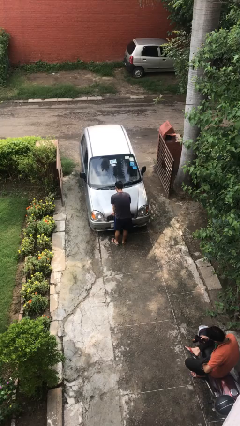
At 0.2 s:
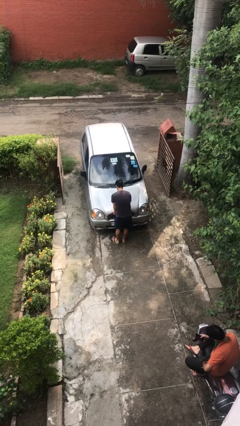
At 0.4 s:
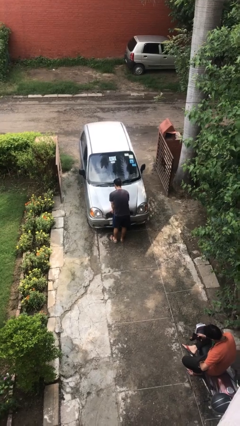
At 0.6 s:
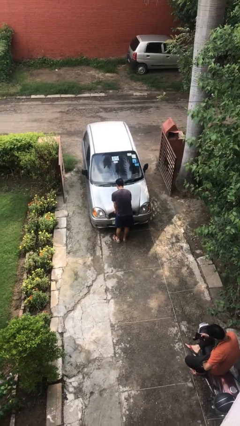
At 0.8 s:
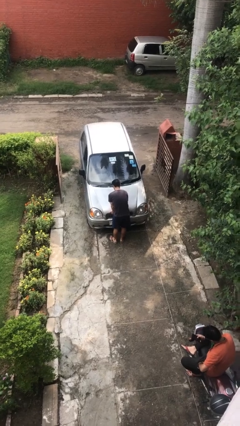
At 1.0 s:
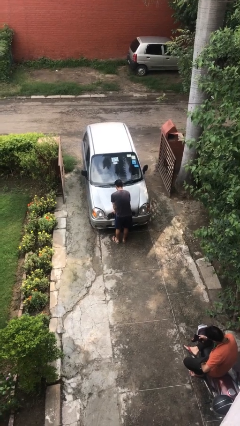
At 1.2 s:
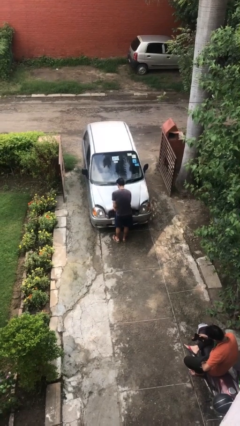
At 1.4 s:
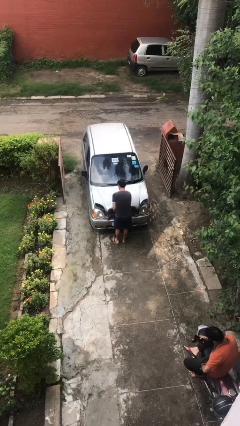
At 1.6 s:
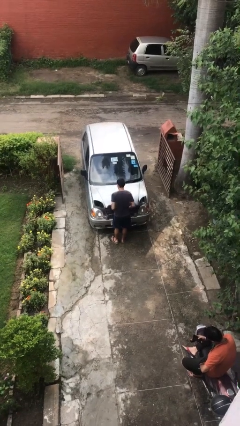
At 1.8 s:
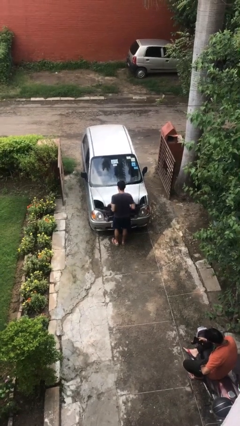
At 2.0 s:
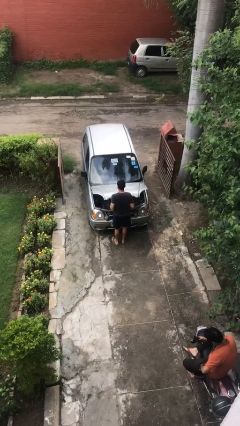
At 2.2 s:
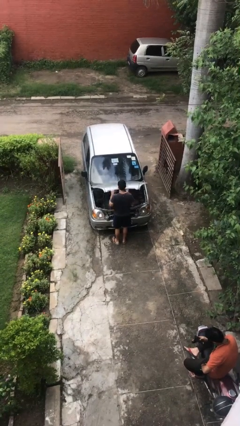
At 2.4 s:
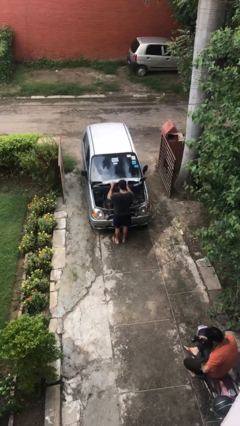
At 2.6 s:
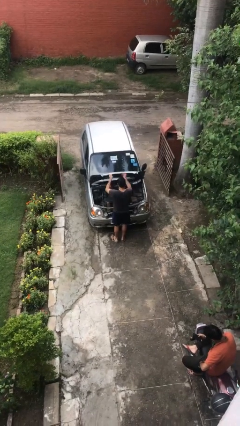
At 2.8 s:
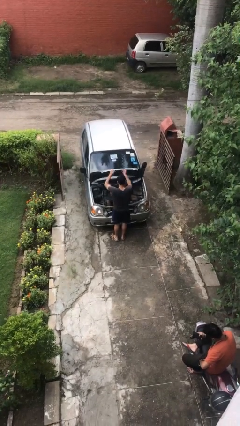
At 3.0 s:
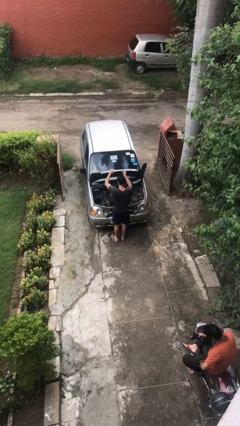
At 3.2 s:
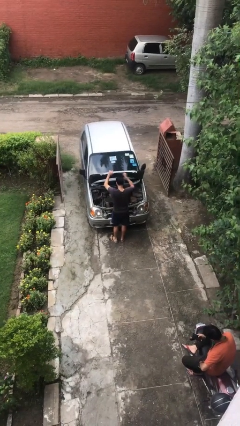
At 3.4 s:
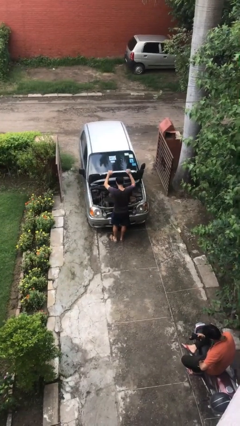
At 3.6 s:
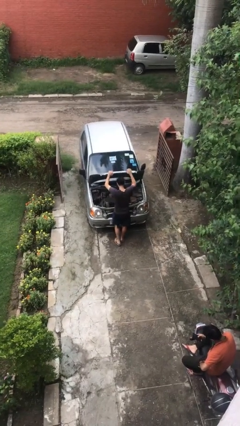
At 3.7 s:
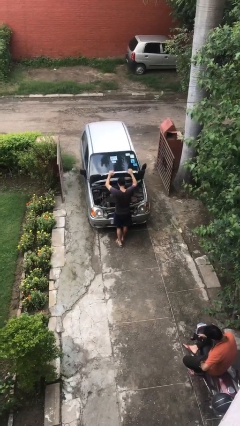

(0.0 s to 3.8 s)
person opens car hood

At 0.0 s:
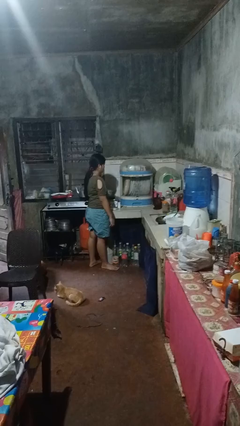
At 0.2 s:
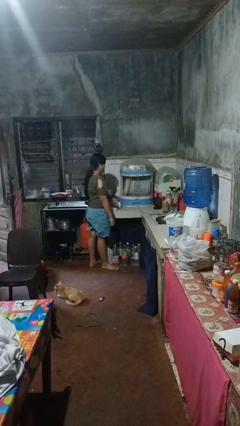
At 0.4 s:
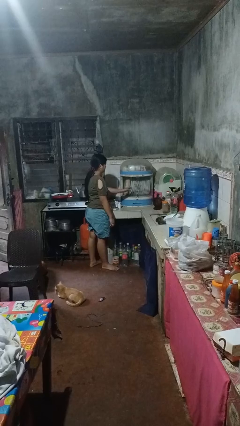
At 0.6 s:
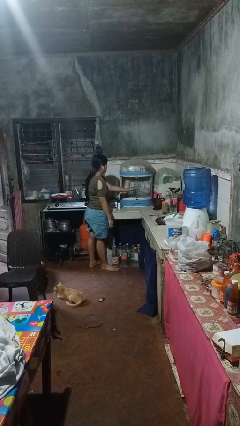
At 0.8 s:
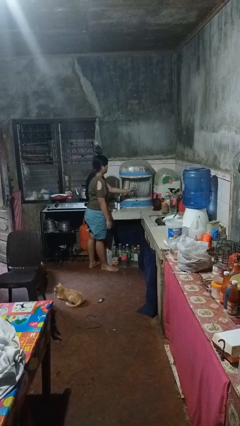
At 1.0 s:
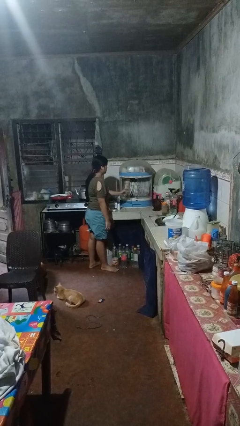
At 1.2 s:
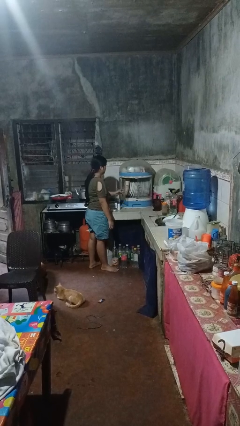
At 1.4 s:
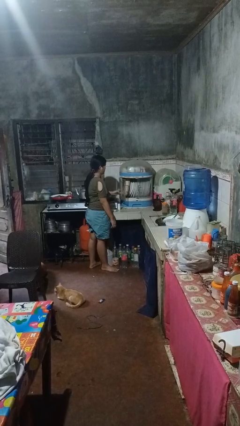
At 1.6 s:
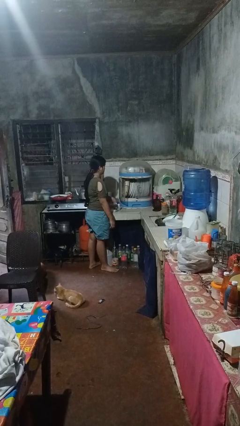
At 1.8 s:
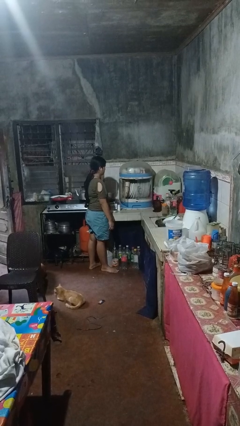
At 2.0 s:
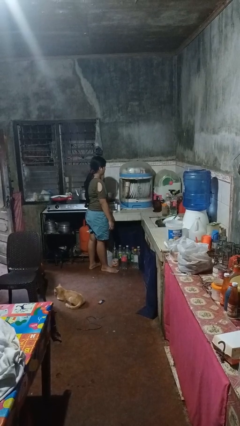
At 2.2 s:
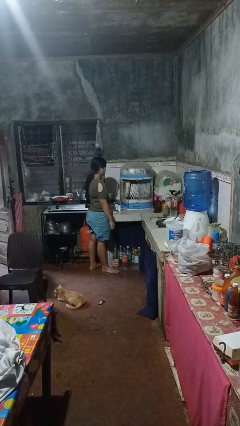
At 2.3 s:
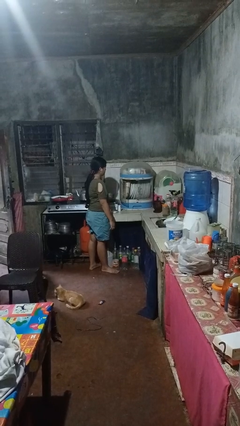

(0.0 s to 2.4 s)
person opens kitchen drawer

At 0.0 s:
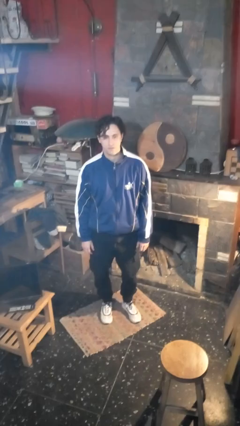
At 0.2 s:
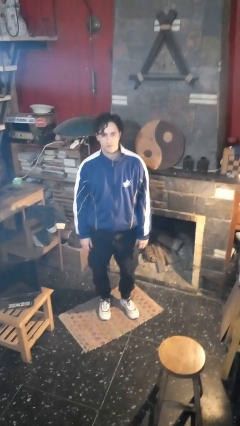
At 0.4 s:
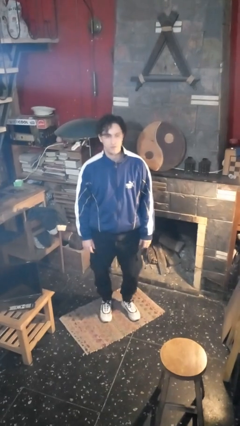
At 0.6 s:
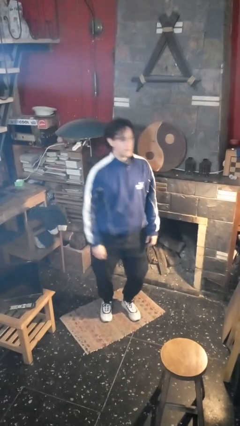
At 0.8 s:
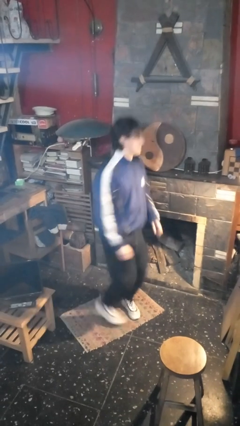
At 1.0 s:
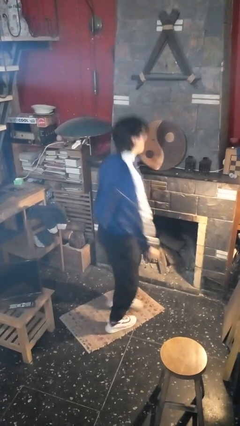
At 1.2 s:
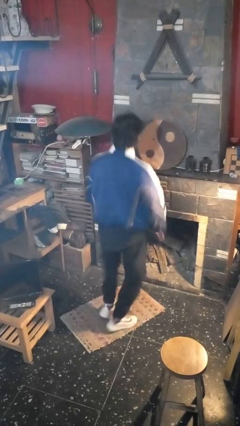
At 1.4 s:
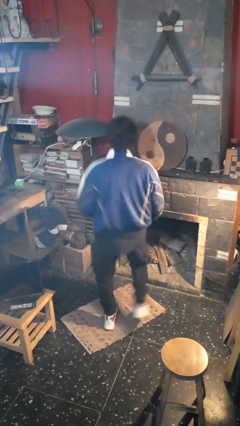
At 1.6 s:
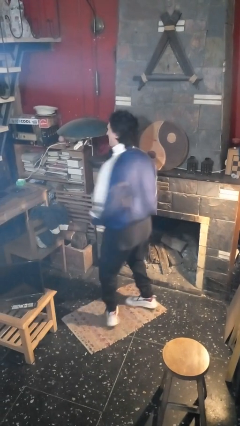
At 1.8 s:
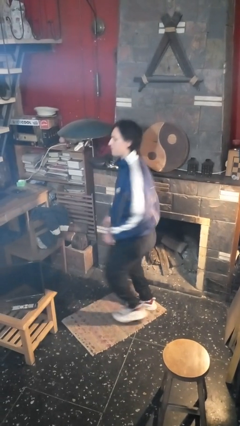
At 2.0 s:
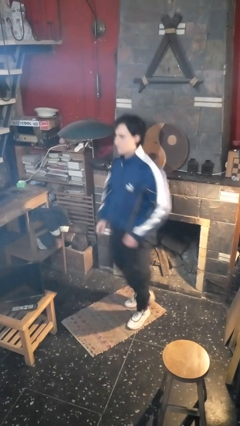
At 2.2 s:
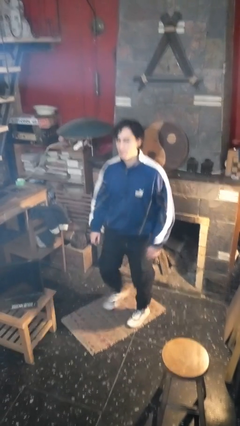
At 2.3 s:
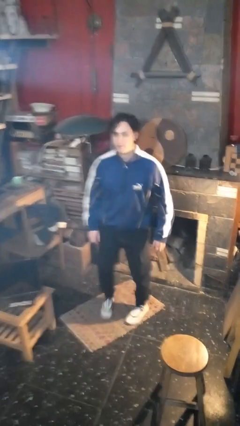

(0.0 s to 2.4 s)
person twirls

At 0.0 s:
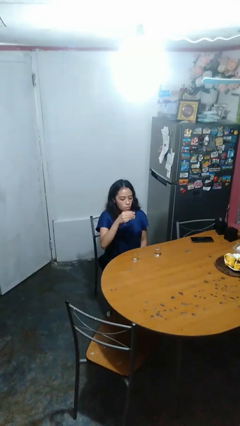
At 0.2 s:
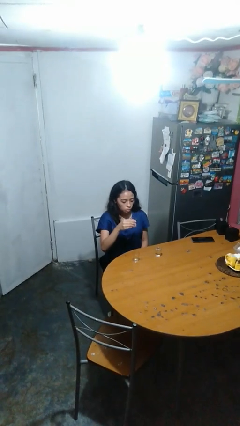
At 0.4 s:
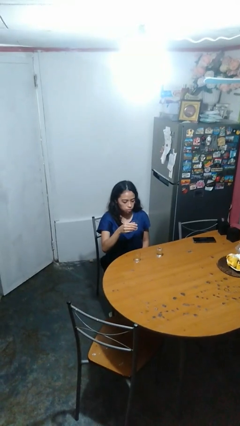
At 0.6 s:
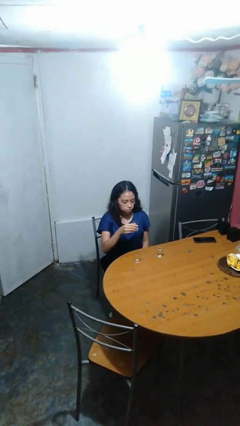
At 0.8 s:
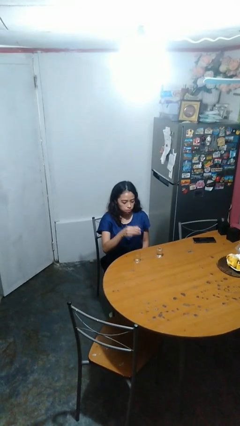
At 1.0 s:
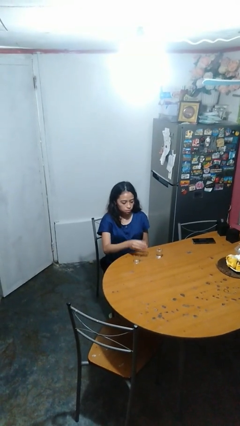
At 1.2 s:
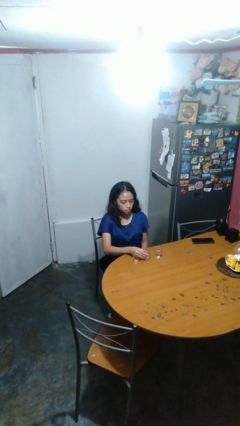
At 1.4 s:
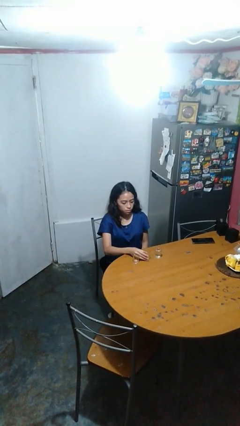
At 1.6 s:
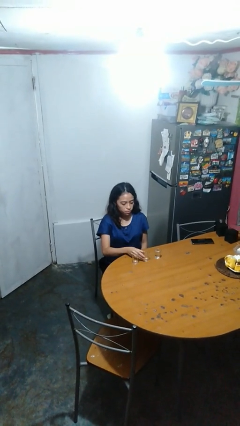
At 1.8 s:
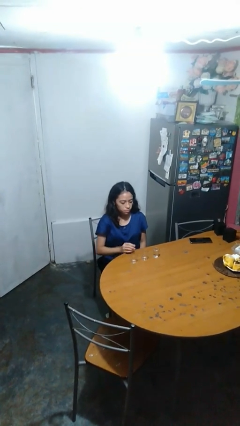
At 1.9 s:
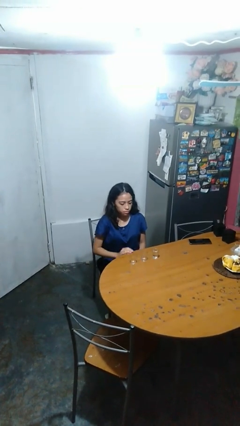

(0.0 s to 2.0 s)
person puts down object on table

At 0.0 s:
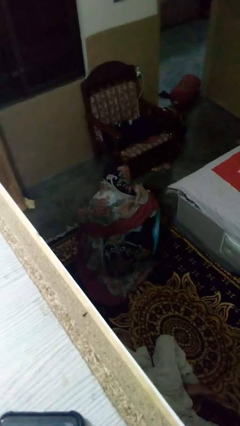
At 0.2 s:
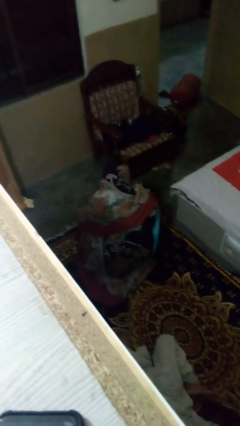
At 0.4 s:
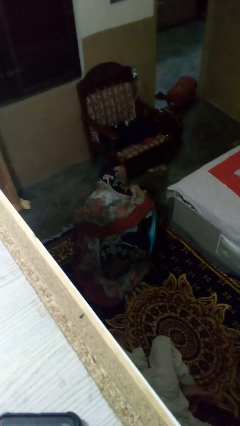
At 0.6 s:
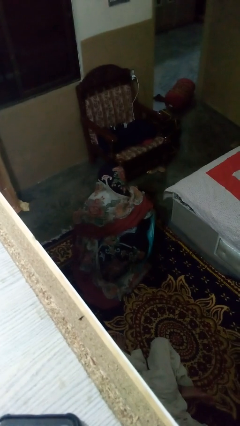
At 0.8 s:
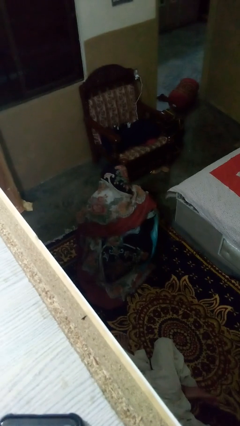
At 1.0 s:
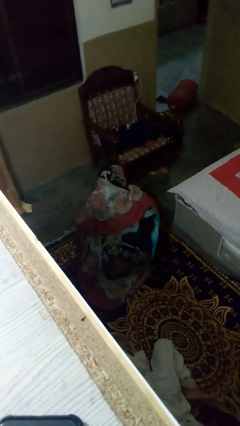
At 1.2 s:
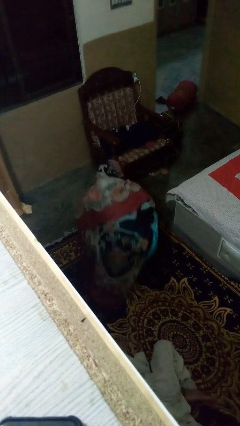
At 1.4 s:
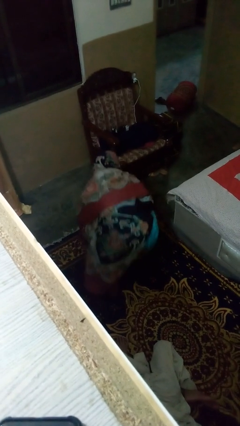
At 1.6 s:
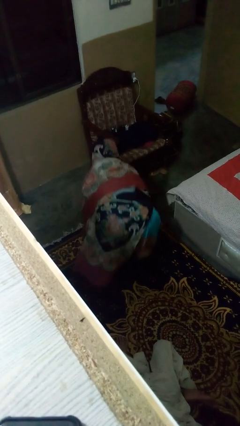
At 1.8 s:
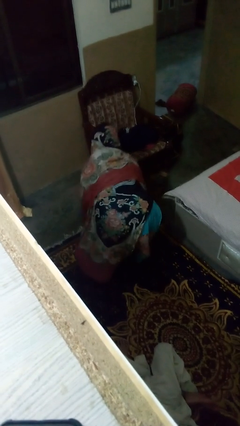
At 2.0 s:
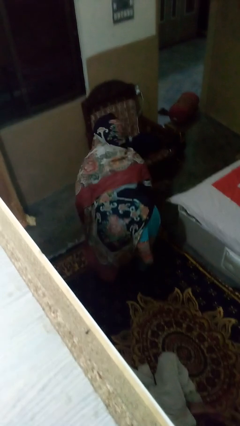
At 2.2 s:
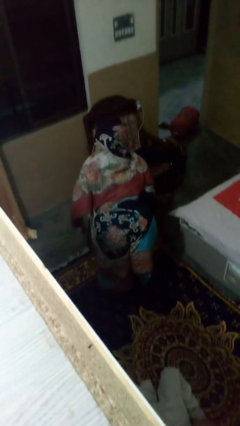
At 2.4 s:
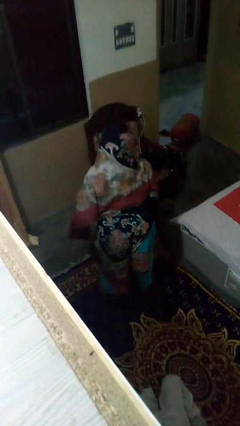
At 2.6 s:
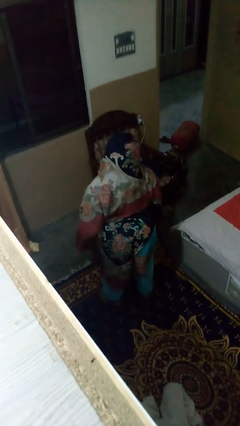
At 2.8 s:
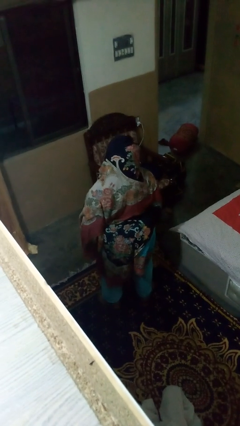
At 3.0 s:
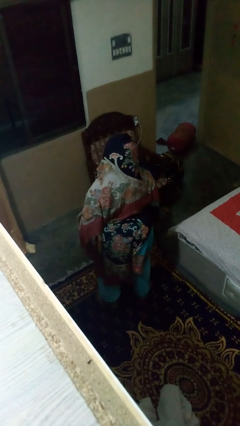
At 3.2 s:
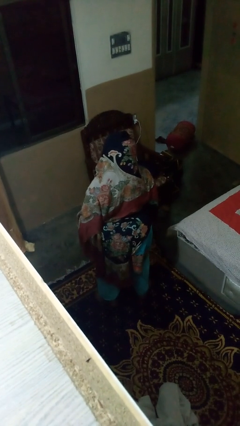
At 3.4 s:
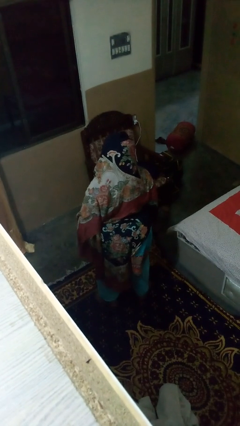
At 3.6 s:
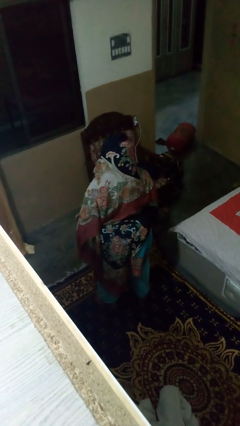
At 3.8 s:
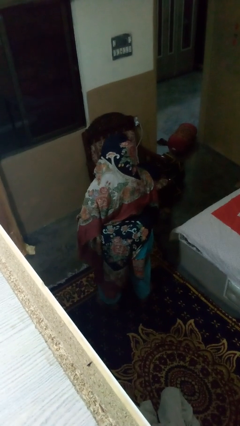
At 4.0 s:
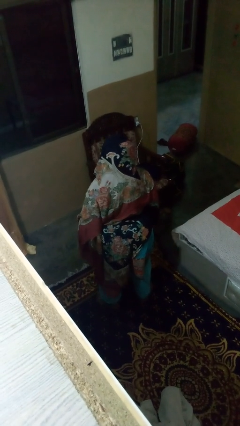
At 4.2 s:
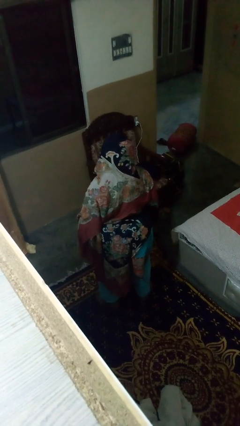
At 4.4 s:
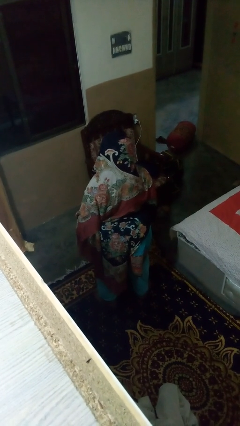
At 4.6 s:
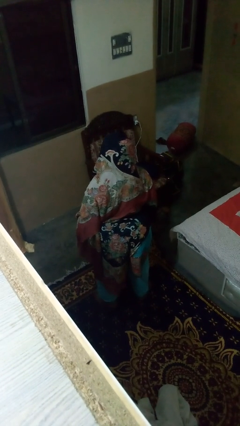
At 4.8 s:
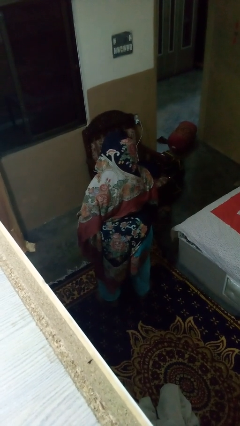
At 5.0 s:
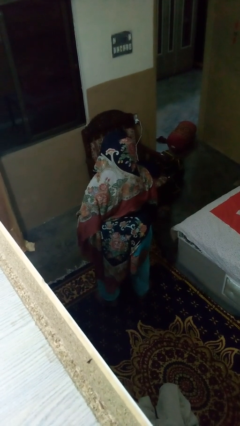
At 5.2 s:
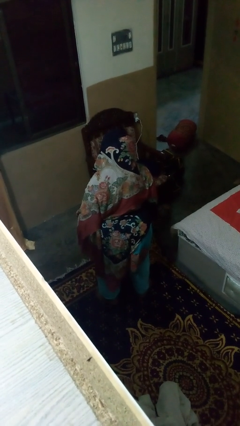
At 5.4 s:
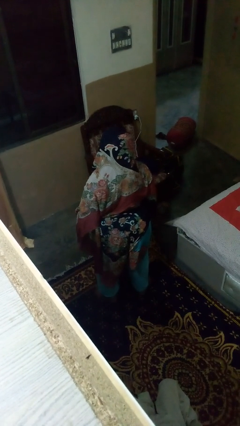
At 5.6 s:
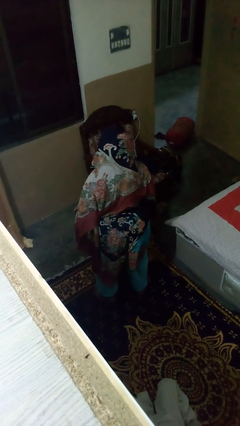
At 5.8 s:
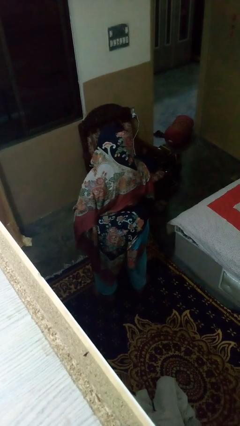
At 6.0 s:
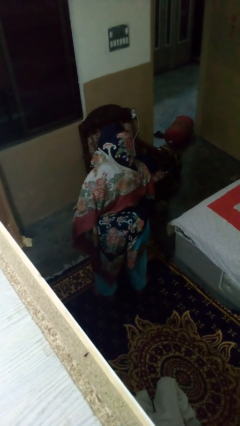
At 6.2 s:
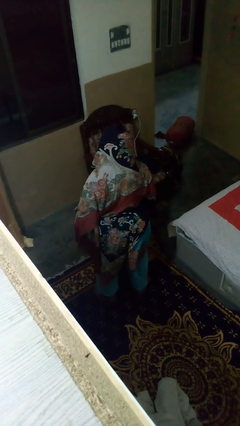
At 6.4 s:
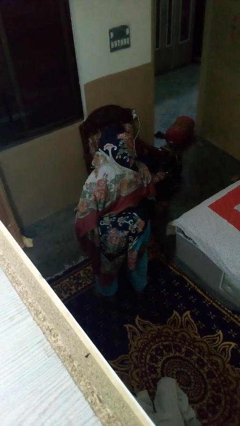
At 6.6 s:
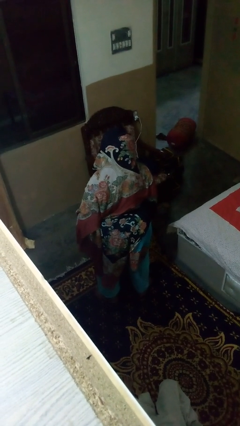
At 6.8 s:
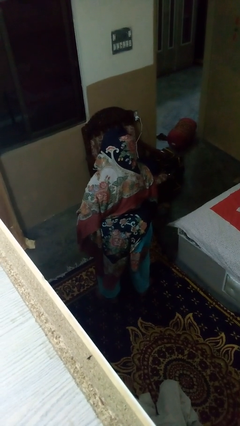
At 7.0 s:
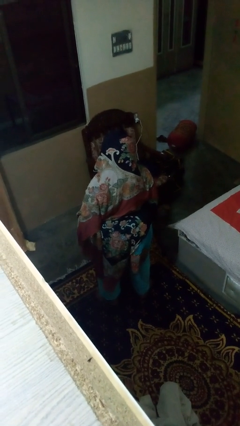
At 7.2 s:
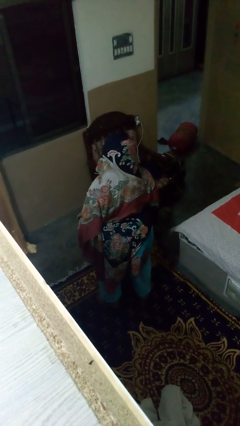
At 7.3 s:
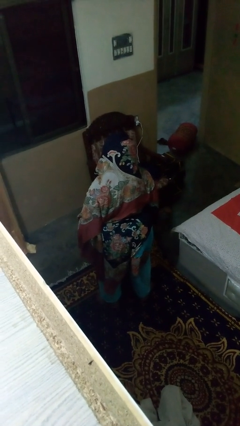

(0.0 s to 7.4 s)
person stands up
